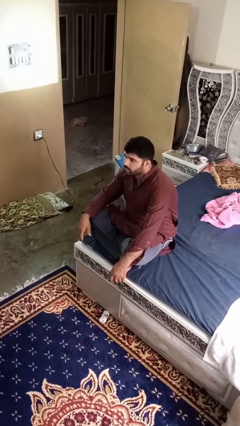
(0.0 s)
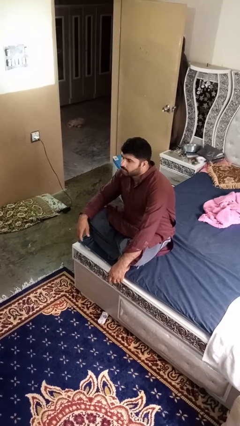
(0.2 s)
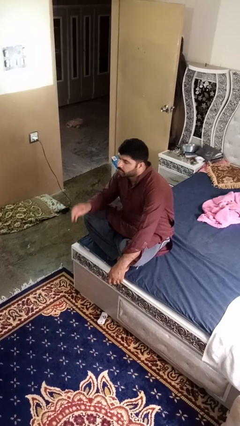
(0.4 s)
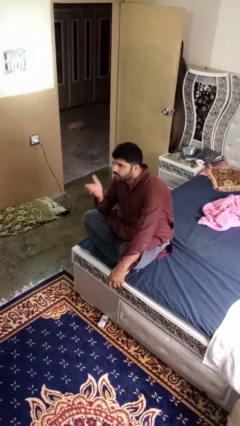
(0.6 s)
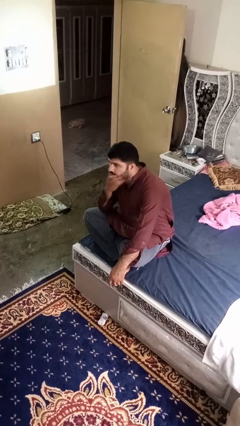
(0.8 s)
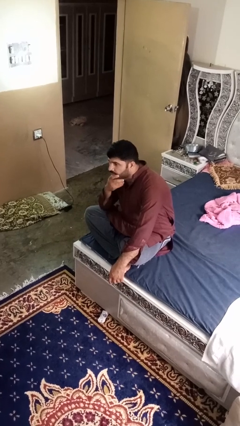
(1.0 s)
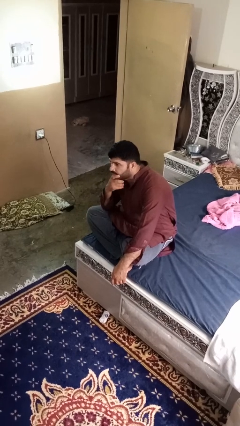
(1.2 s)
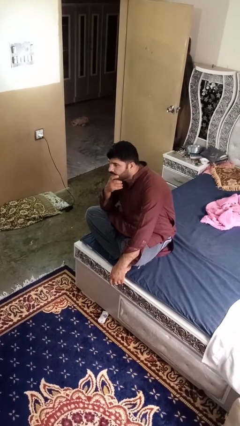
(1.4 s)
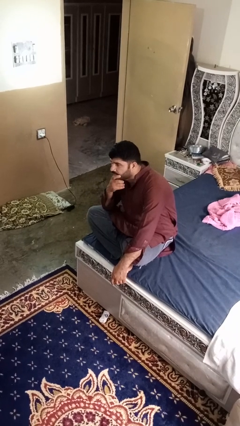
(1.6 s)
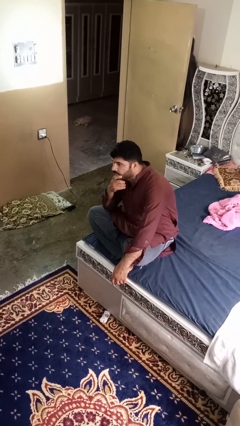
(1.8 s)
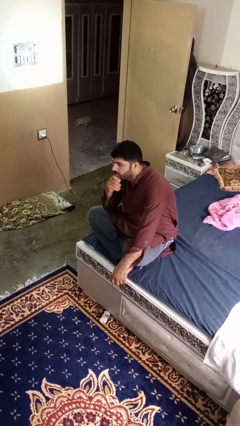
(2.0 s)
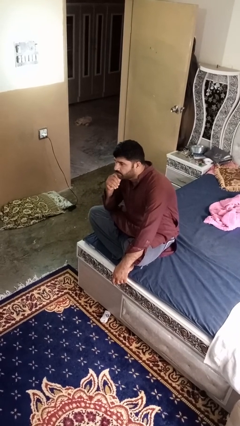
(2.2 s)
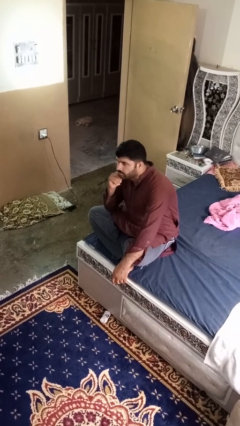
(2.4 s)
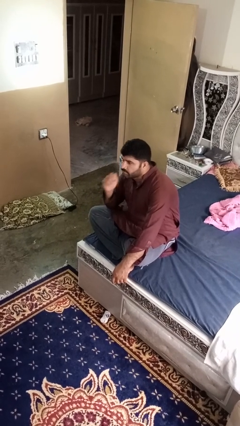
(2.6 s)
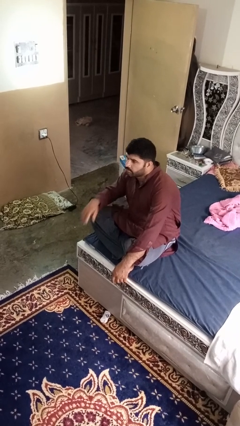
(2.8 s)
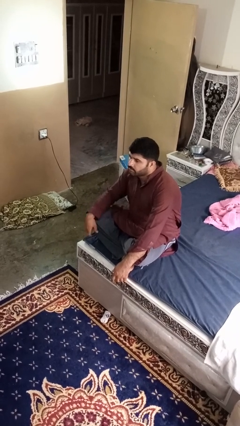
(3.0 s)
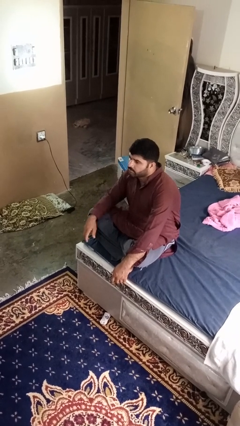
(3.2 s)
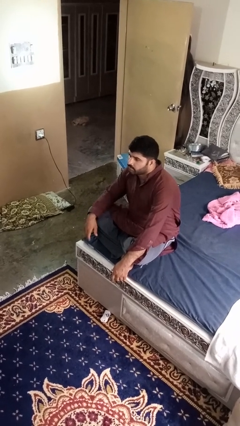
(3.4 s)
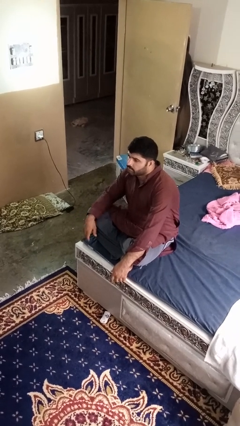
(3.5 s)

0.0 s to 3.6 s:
person strokes chin

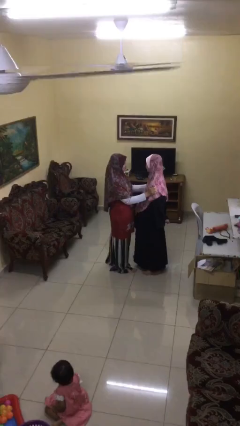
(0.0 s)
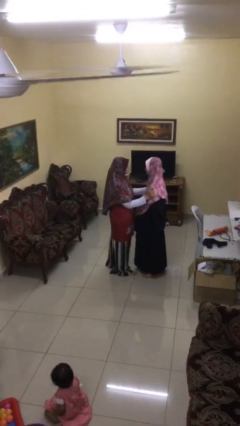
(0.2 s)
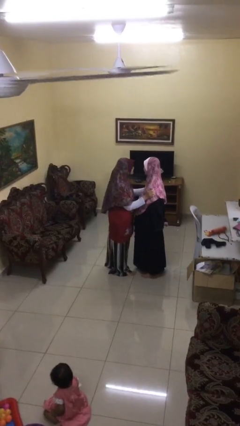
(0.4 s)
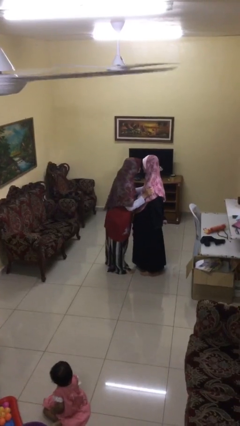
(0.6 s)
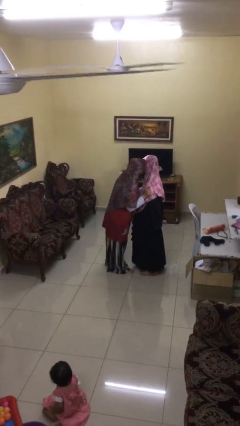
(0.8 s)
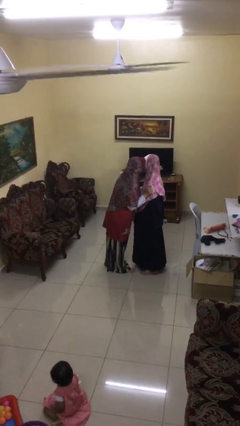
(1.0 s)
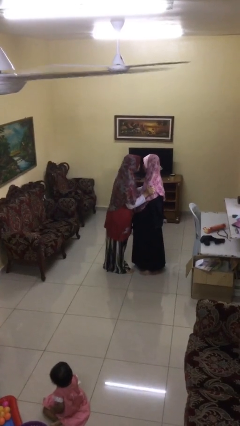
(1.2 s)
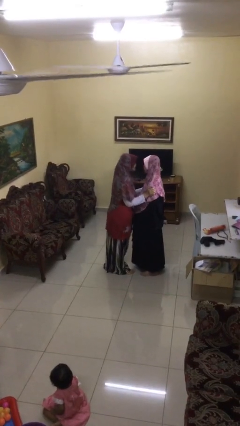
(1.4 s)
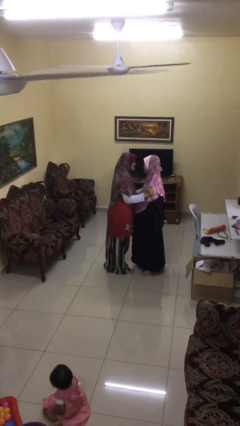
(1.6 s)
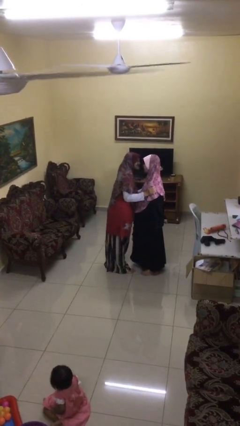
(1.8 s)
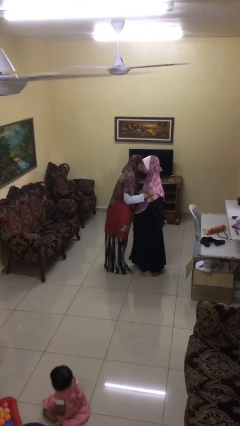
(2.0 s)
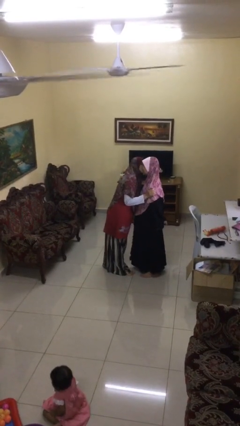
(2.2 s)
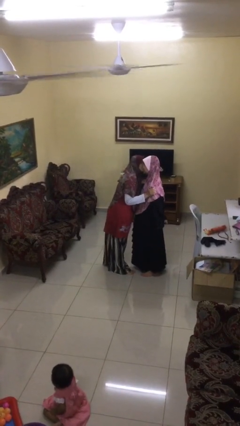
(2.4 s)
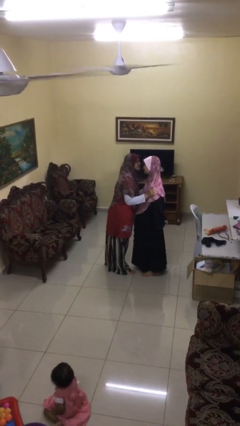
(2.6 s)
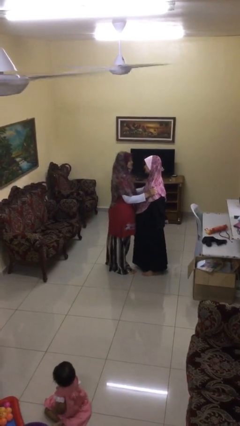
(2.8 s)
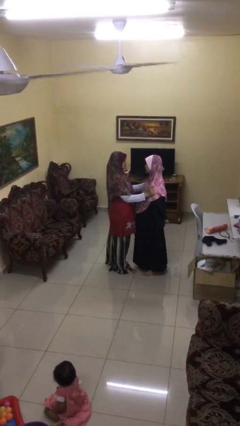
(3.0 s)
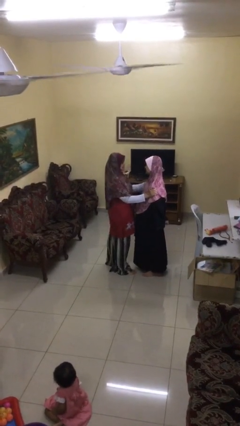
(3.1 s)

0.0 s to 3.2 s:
person kisses cheek of person

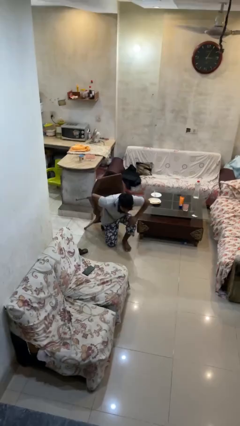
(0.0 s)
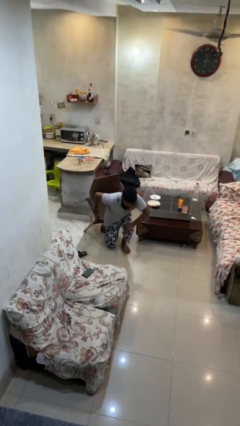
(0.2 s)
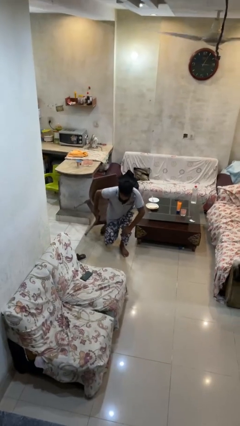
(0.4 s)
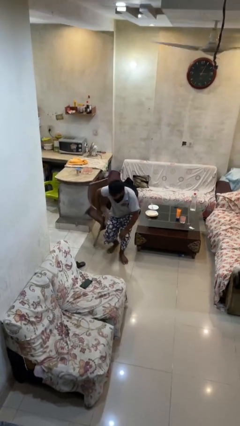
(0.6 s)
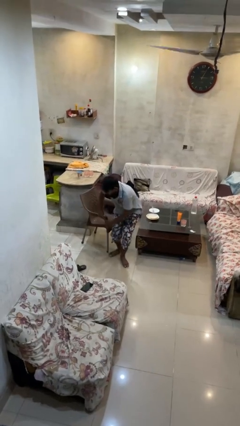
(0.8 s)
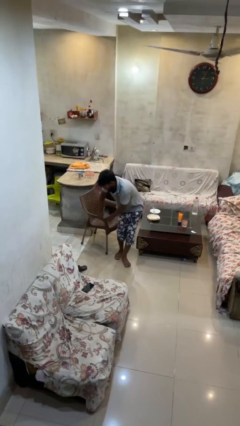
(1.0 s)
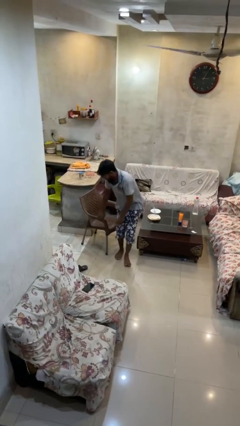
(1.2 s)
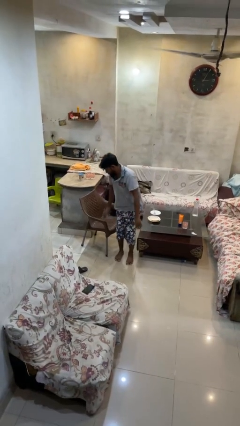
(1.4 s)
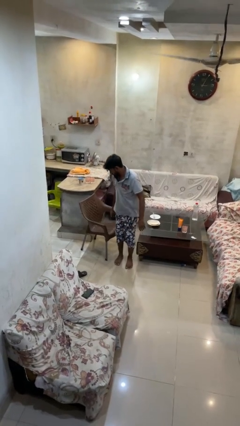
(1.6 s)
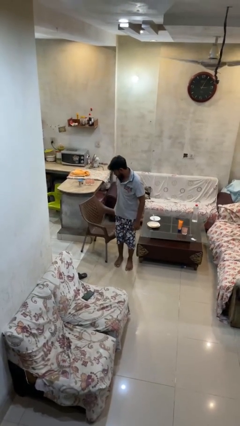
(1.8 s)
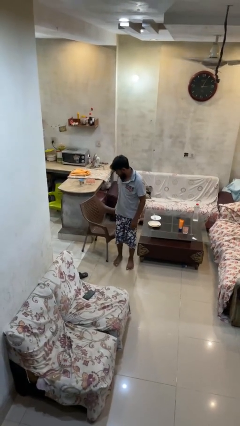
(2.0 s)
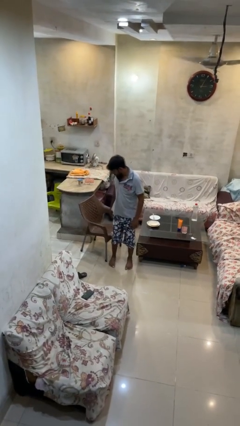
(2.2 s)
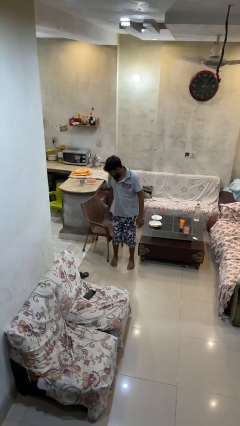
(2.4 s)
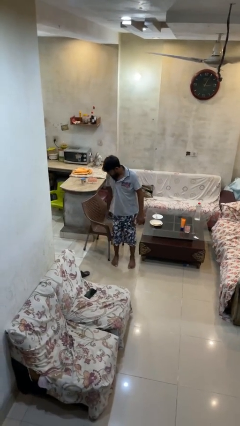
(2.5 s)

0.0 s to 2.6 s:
person stands up from floor

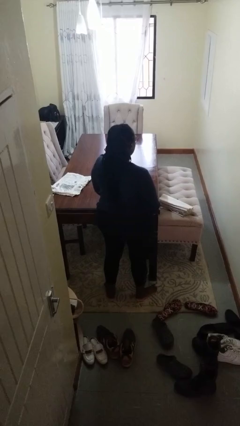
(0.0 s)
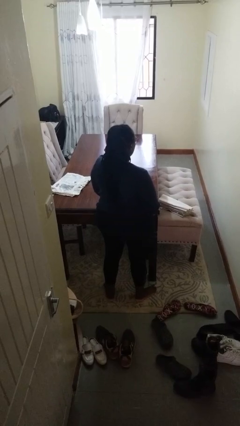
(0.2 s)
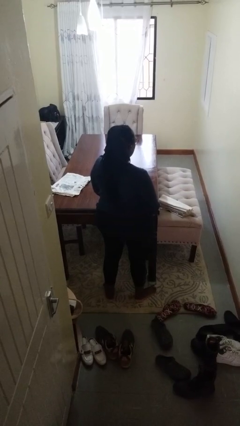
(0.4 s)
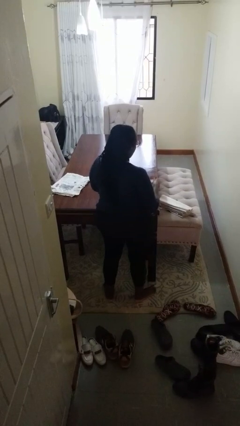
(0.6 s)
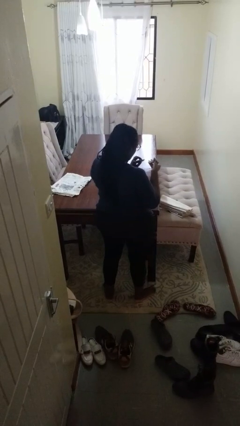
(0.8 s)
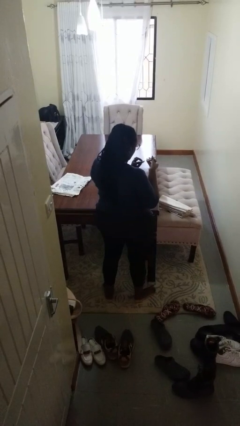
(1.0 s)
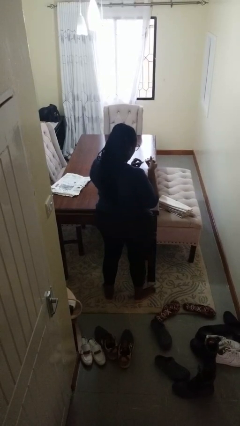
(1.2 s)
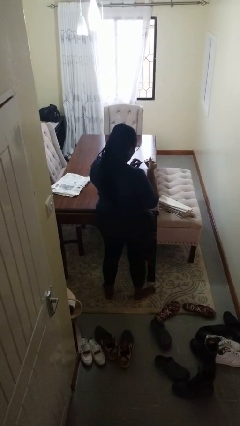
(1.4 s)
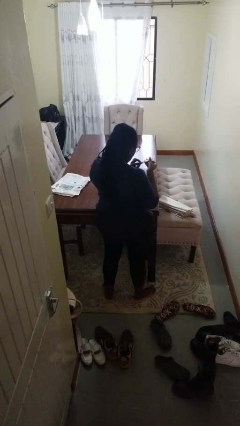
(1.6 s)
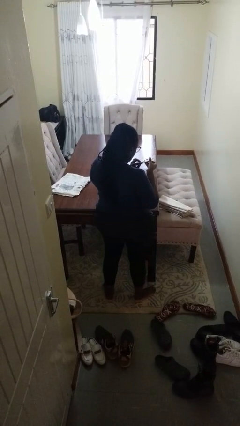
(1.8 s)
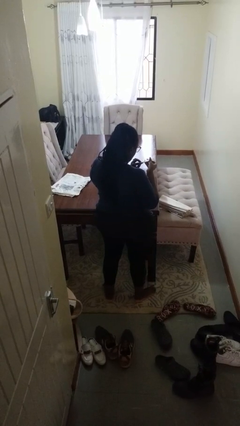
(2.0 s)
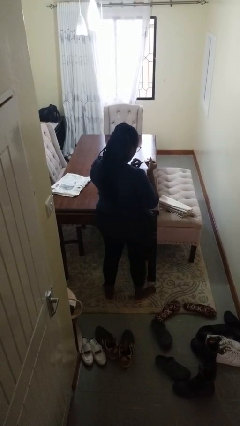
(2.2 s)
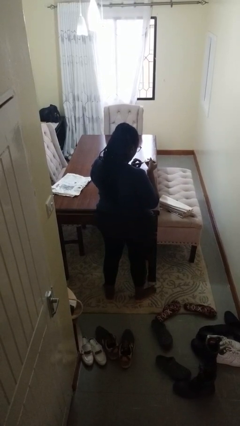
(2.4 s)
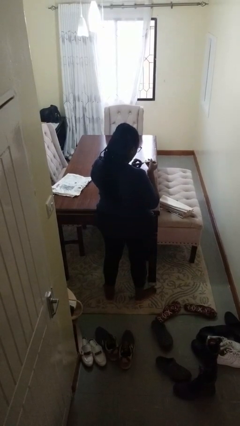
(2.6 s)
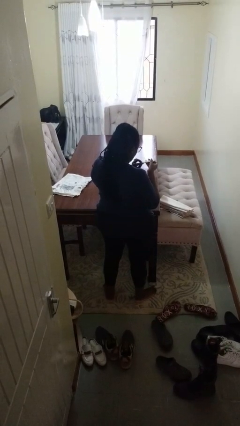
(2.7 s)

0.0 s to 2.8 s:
person clips fingernails

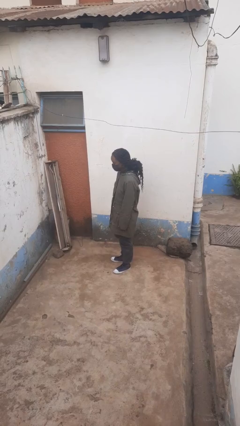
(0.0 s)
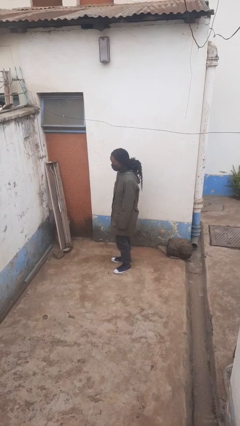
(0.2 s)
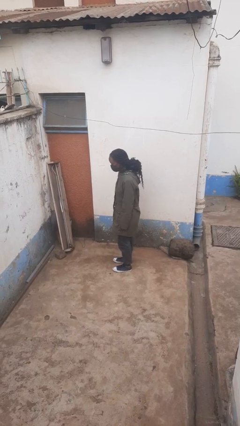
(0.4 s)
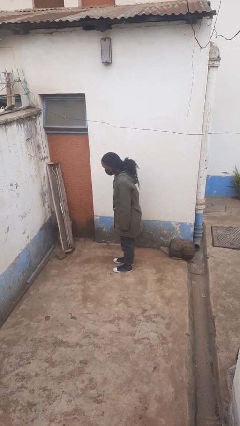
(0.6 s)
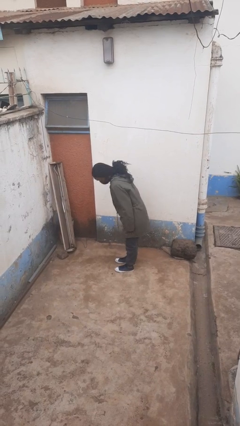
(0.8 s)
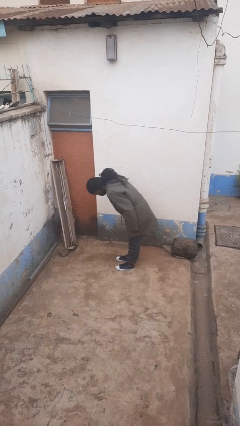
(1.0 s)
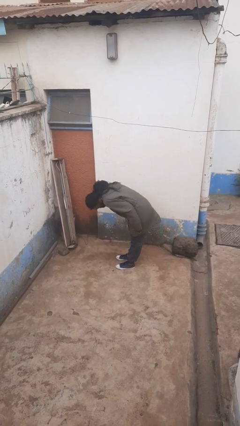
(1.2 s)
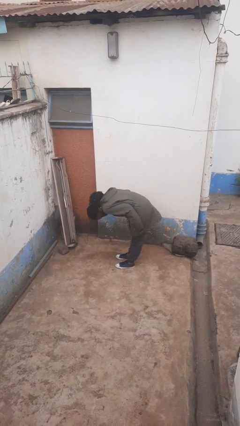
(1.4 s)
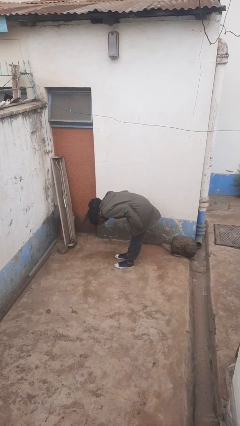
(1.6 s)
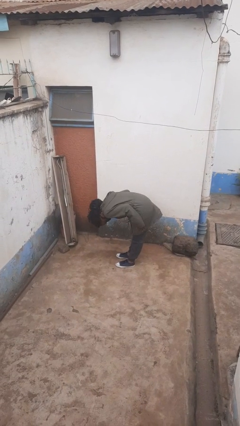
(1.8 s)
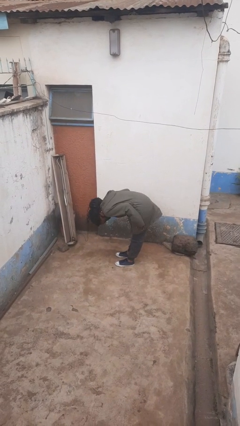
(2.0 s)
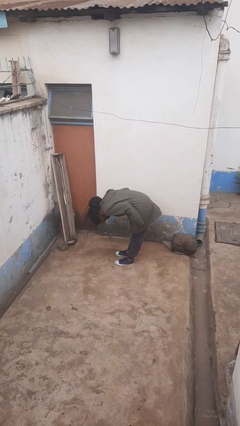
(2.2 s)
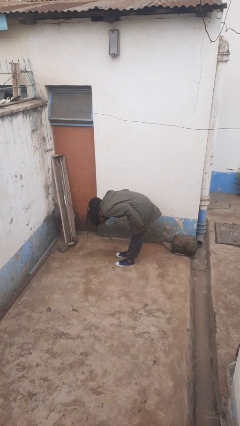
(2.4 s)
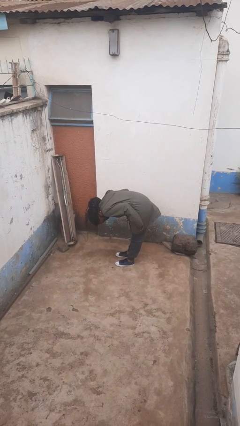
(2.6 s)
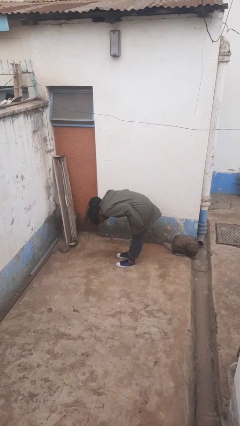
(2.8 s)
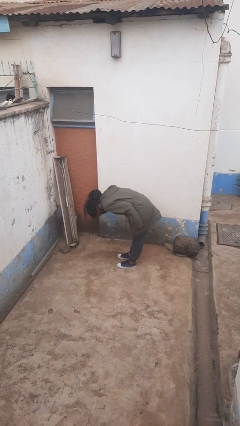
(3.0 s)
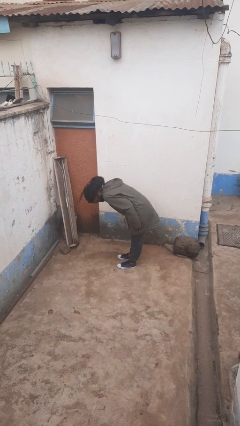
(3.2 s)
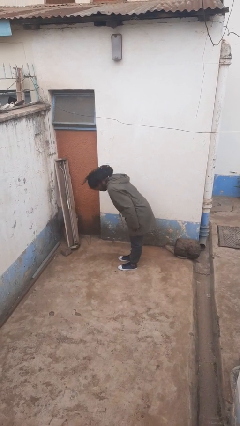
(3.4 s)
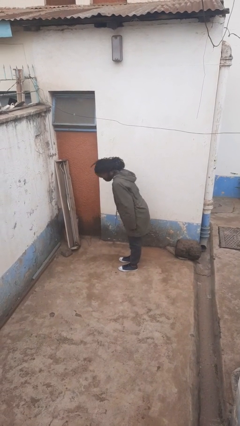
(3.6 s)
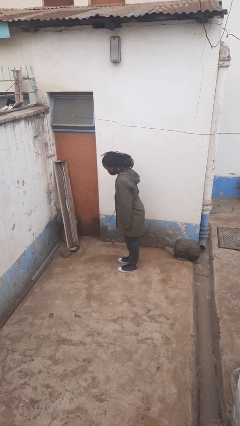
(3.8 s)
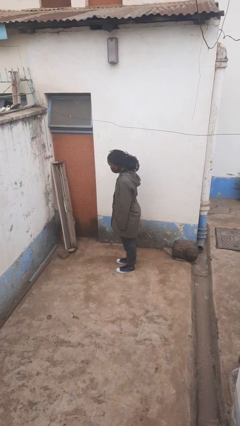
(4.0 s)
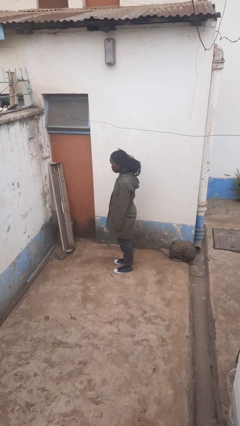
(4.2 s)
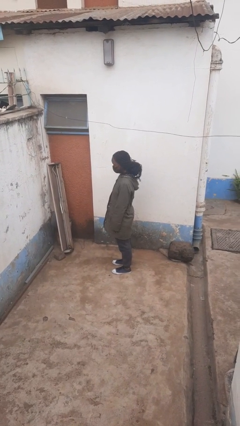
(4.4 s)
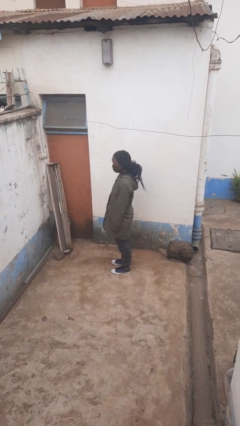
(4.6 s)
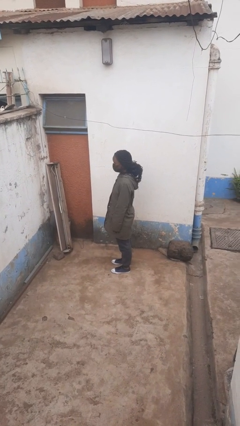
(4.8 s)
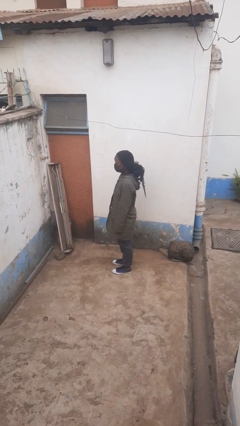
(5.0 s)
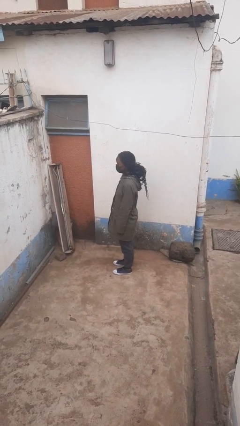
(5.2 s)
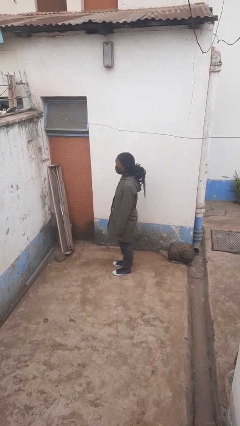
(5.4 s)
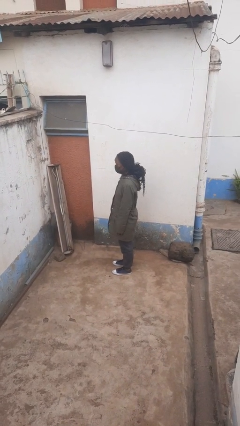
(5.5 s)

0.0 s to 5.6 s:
person bows
